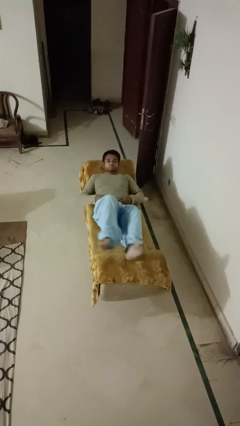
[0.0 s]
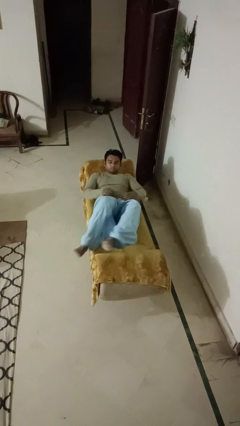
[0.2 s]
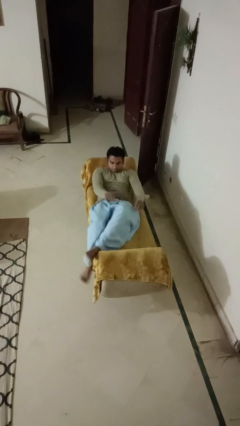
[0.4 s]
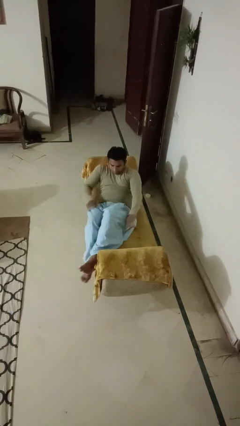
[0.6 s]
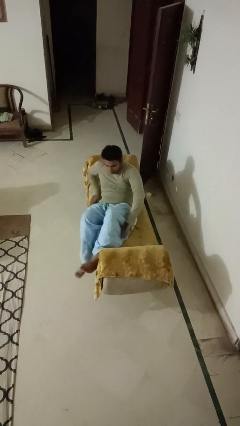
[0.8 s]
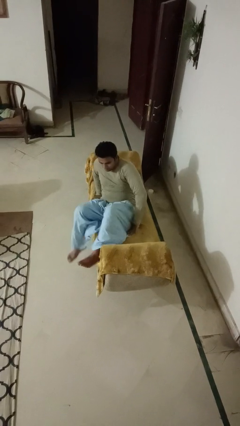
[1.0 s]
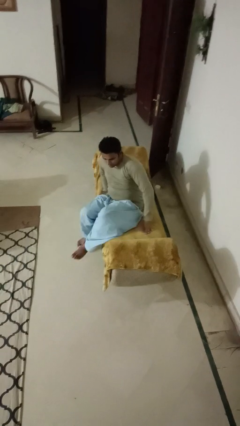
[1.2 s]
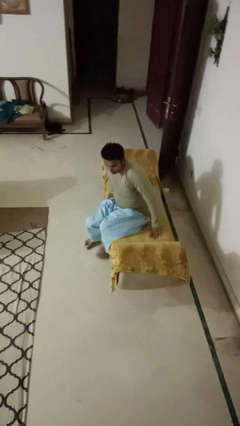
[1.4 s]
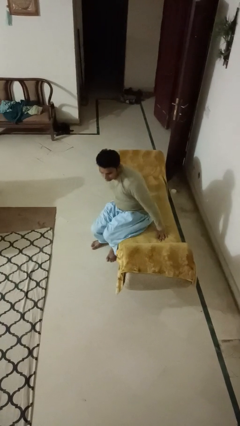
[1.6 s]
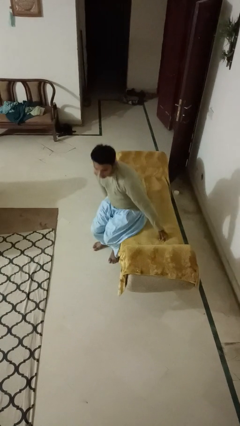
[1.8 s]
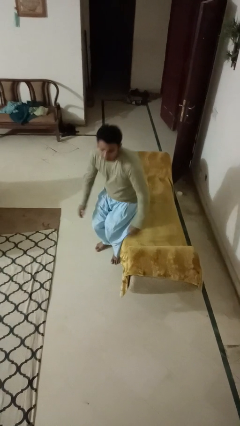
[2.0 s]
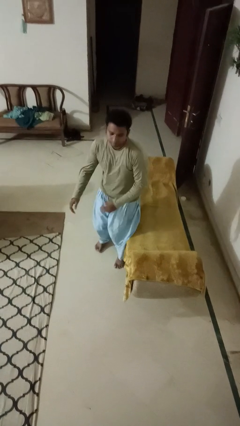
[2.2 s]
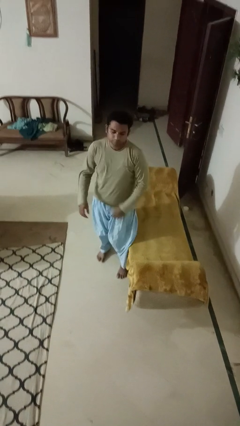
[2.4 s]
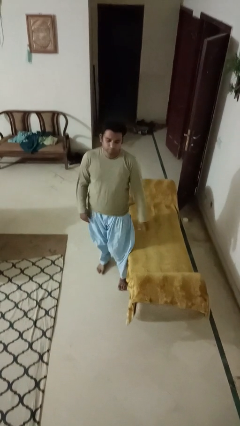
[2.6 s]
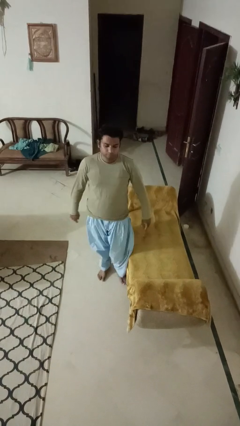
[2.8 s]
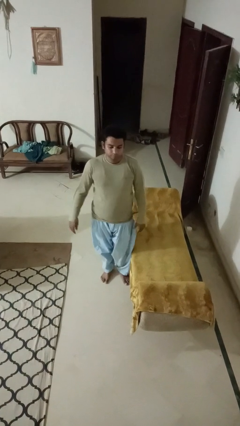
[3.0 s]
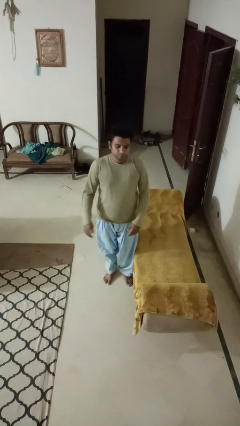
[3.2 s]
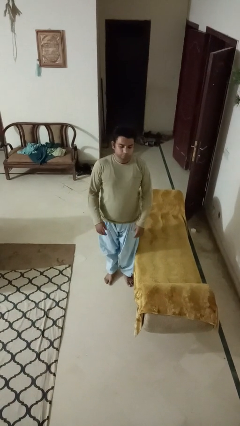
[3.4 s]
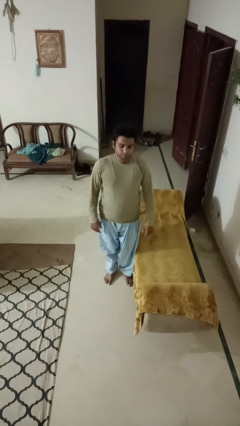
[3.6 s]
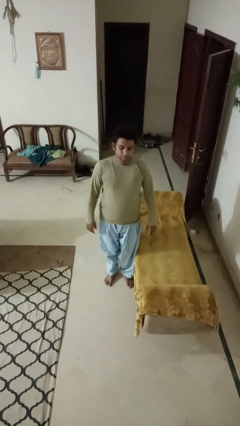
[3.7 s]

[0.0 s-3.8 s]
person stands up

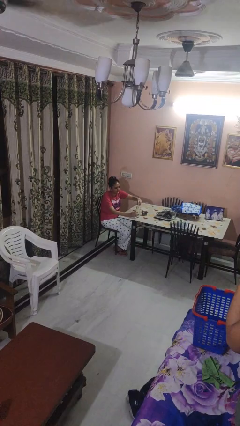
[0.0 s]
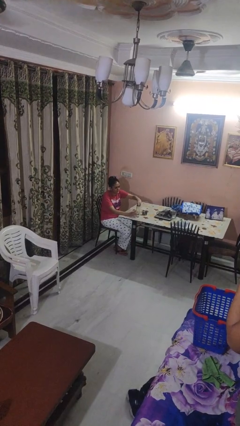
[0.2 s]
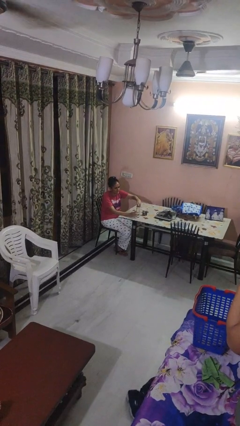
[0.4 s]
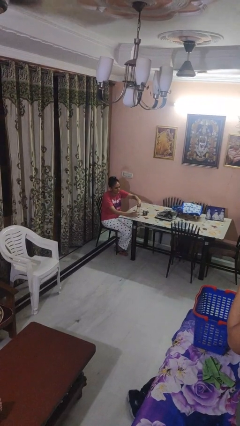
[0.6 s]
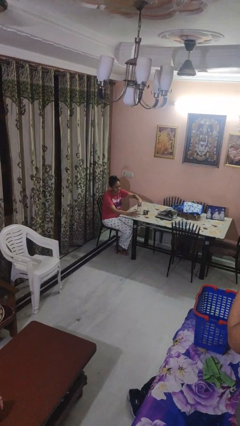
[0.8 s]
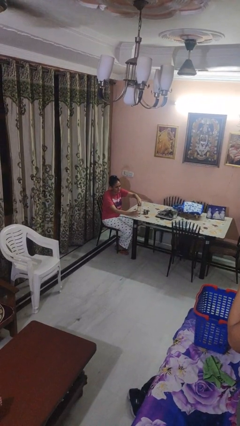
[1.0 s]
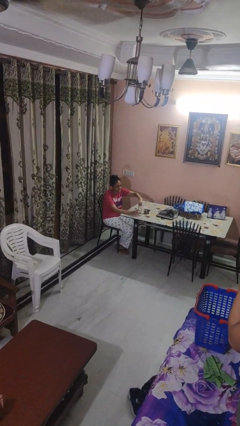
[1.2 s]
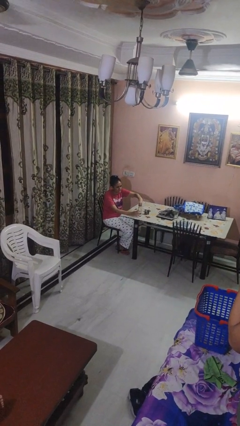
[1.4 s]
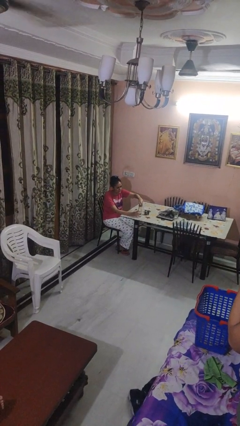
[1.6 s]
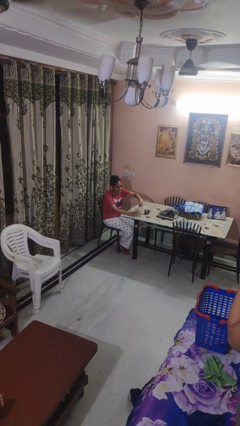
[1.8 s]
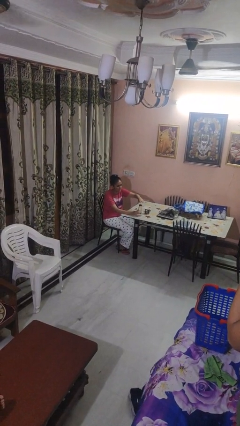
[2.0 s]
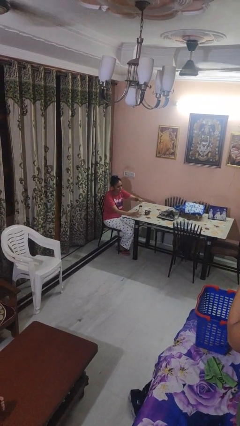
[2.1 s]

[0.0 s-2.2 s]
person screws lid to bottle

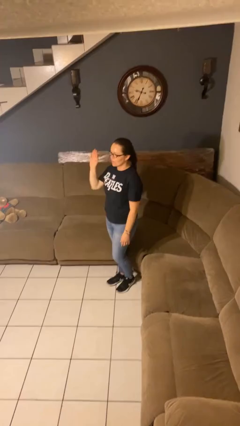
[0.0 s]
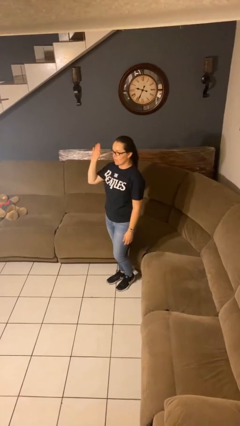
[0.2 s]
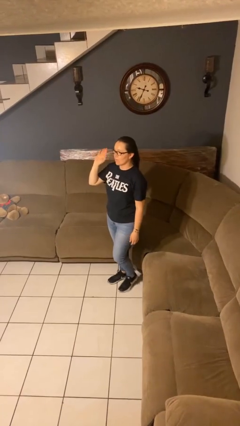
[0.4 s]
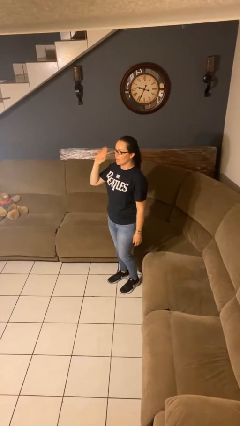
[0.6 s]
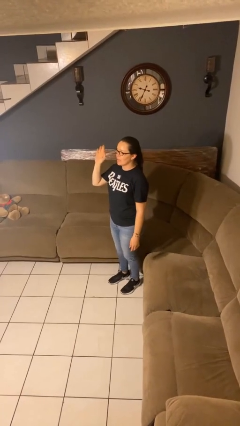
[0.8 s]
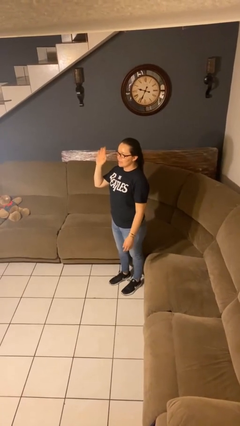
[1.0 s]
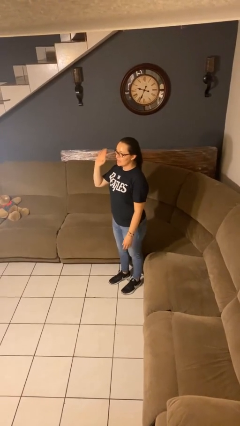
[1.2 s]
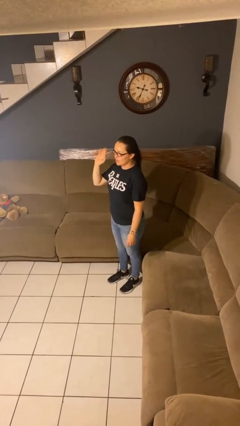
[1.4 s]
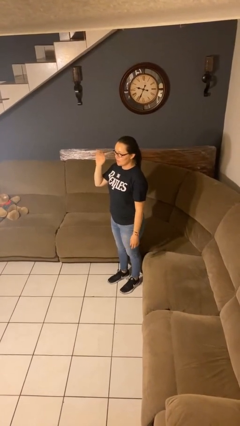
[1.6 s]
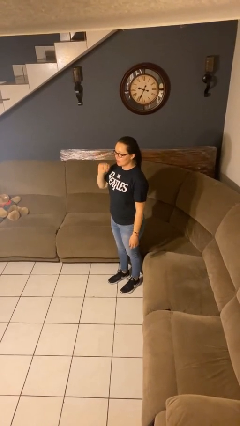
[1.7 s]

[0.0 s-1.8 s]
person waves at person

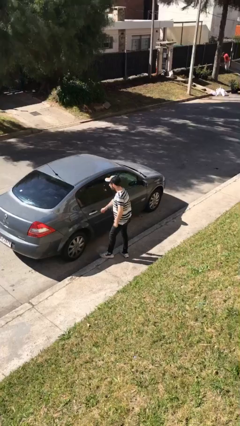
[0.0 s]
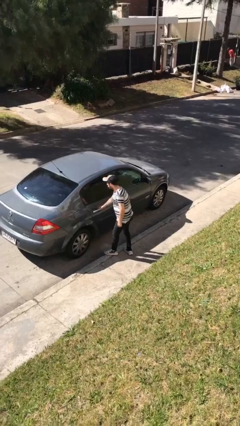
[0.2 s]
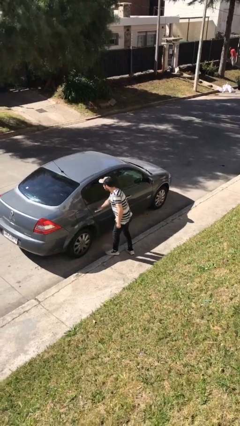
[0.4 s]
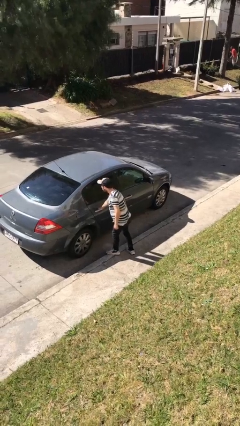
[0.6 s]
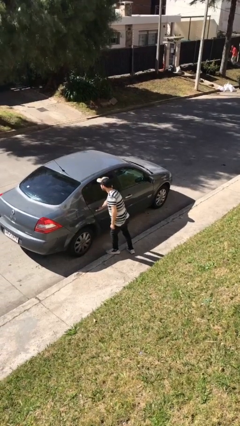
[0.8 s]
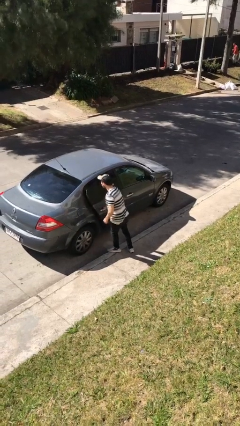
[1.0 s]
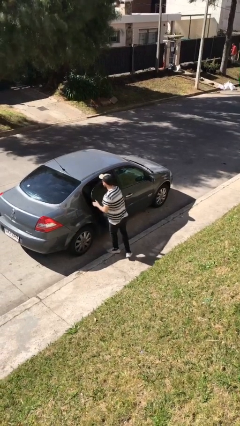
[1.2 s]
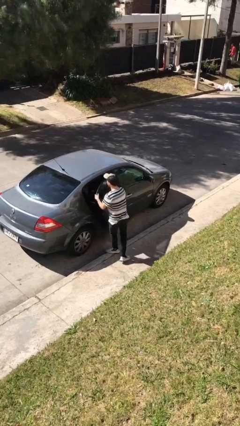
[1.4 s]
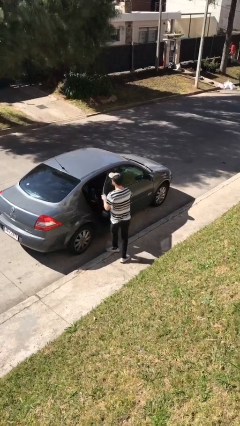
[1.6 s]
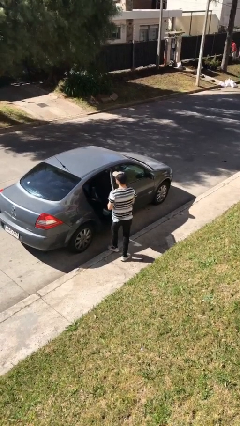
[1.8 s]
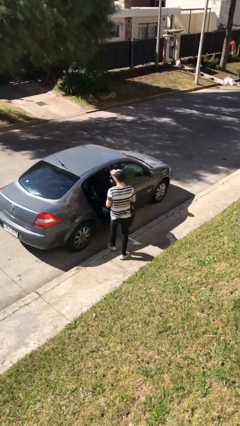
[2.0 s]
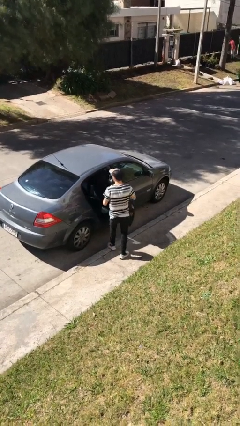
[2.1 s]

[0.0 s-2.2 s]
person opens car door

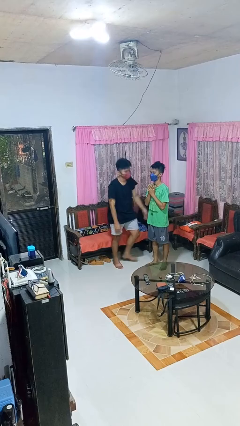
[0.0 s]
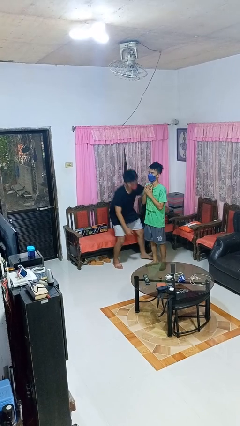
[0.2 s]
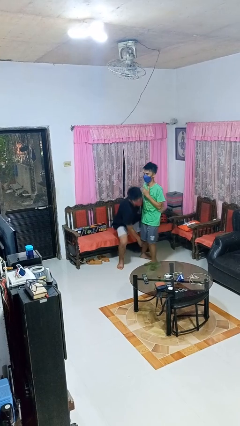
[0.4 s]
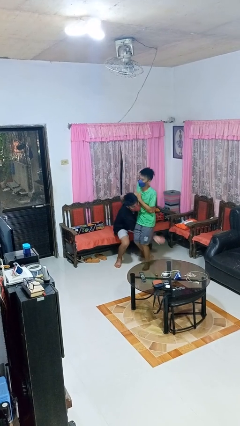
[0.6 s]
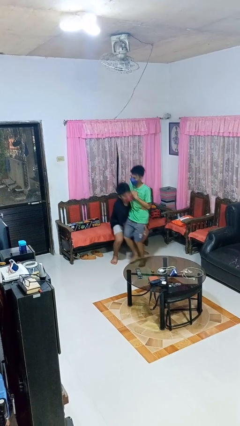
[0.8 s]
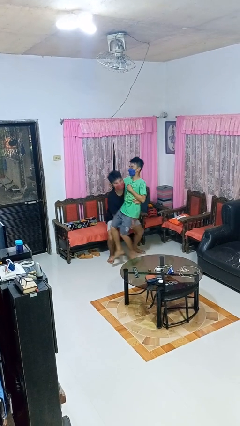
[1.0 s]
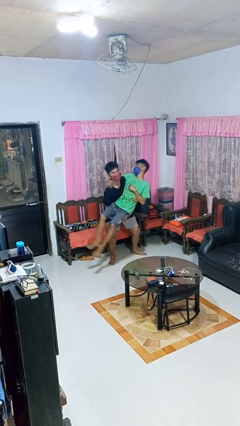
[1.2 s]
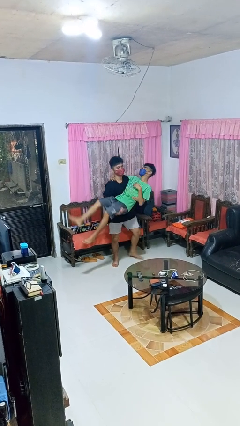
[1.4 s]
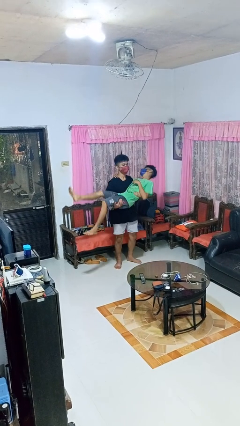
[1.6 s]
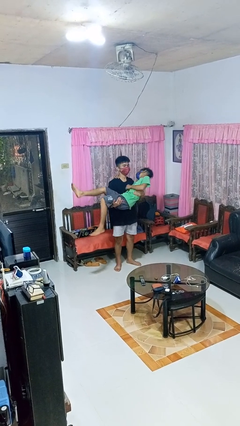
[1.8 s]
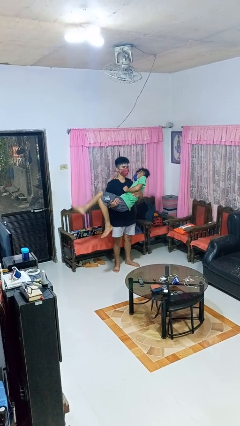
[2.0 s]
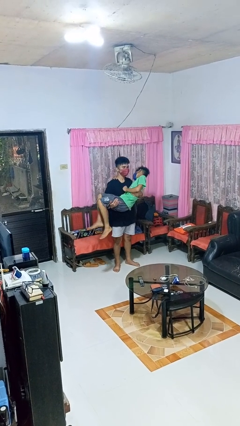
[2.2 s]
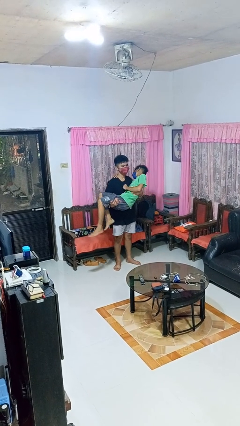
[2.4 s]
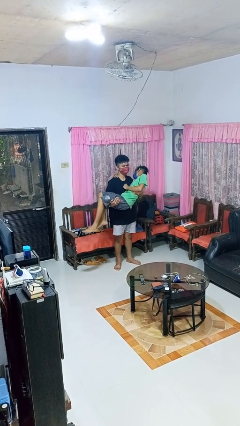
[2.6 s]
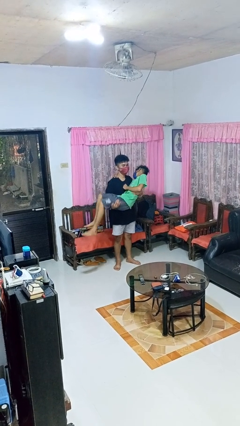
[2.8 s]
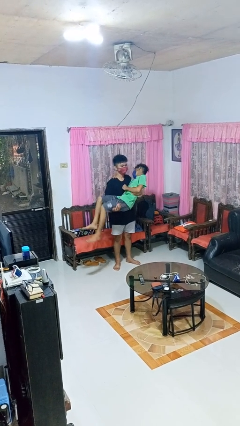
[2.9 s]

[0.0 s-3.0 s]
person picks up person

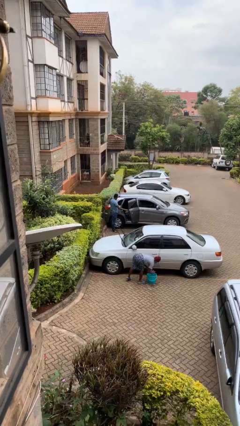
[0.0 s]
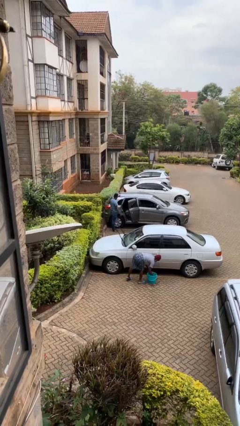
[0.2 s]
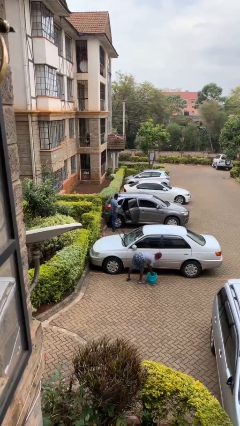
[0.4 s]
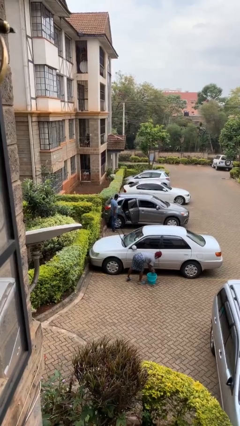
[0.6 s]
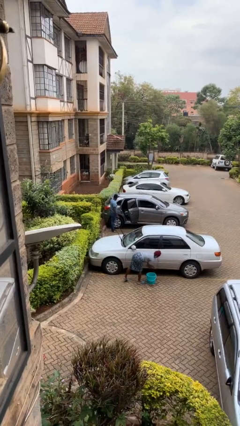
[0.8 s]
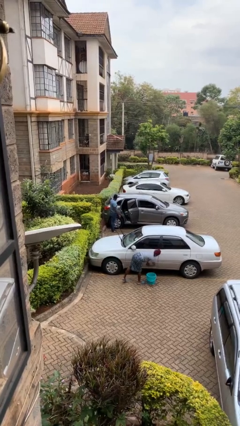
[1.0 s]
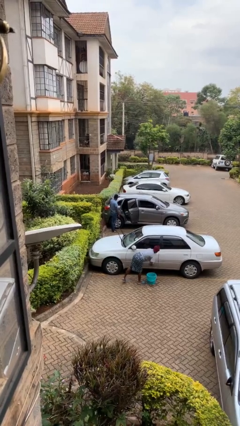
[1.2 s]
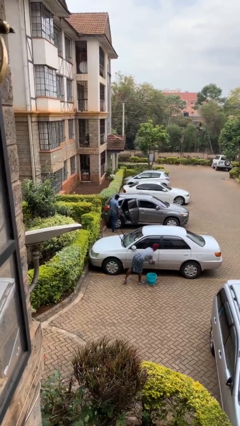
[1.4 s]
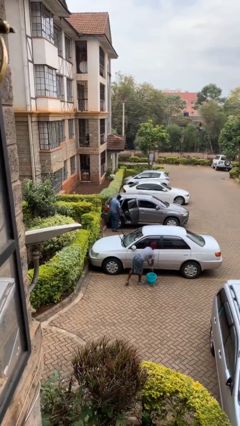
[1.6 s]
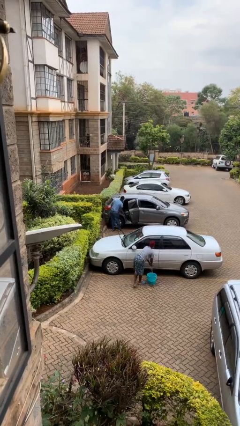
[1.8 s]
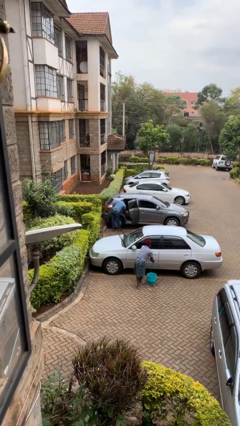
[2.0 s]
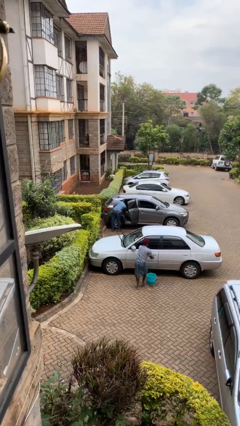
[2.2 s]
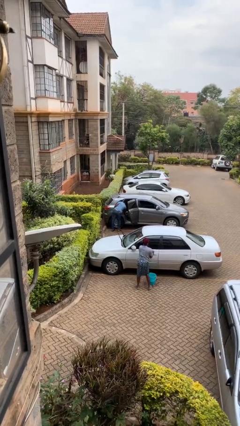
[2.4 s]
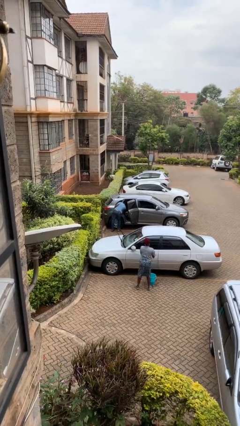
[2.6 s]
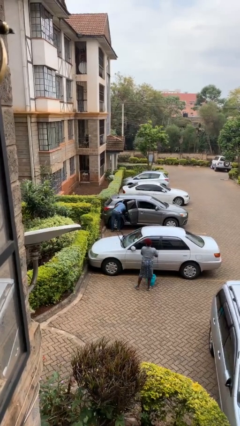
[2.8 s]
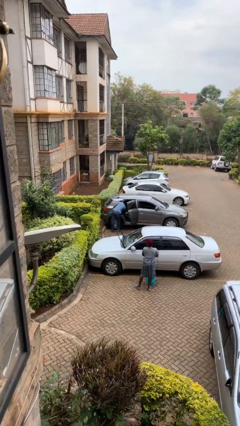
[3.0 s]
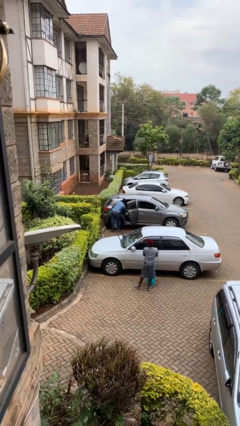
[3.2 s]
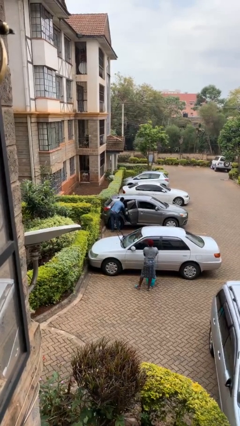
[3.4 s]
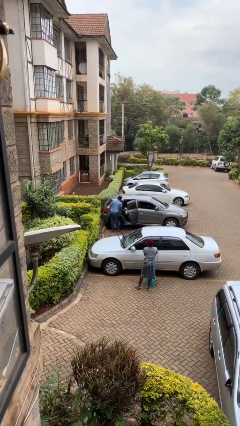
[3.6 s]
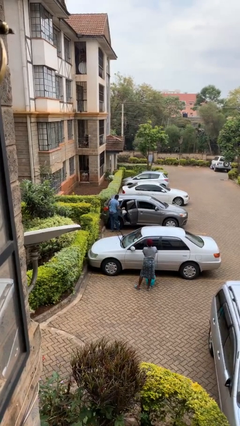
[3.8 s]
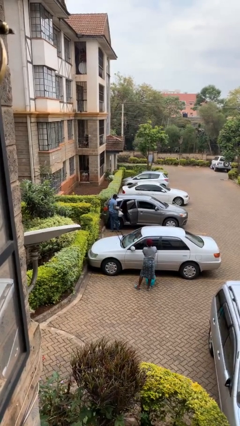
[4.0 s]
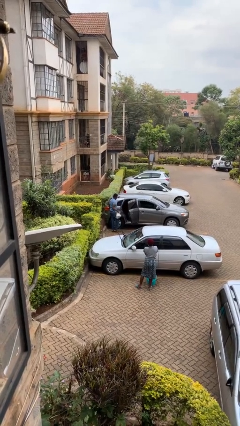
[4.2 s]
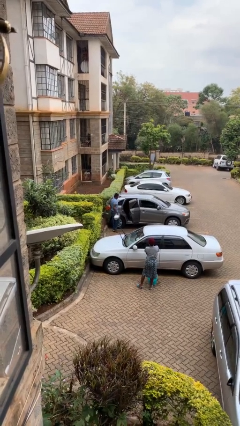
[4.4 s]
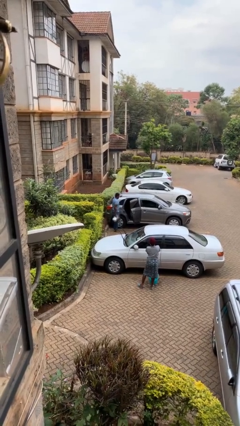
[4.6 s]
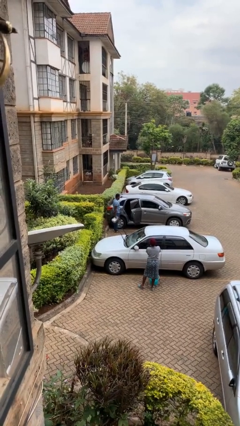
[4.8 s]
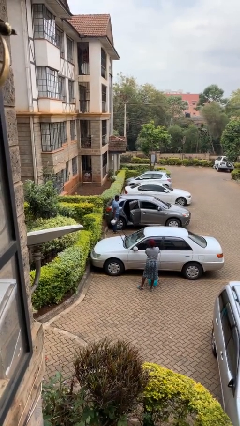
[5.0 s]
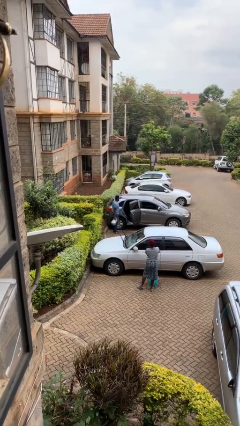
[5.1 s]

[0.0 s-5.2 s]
person unloads car
